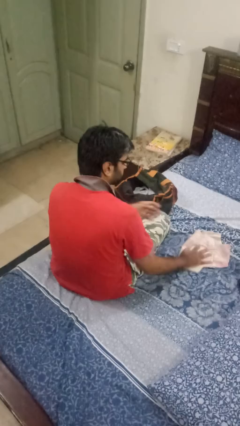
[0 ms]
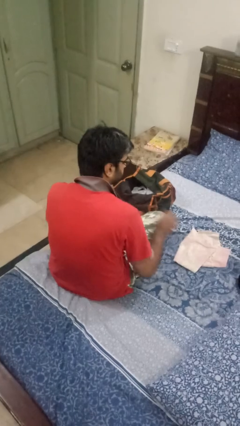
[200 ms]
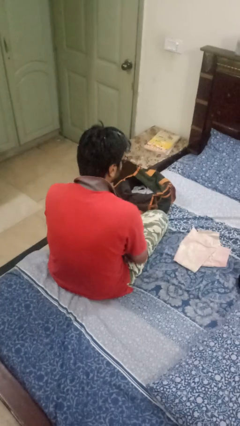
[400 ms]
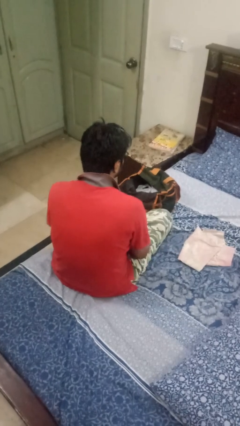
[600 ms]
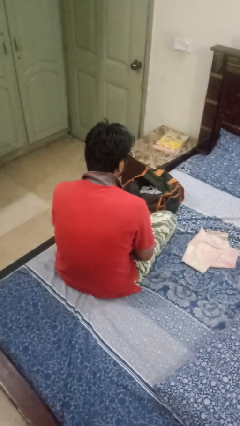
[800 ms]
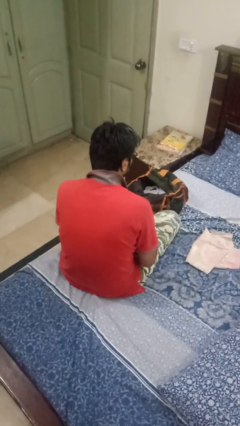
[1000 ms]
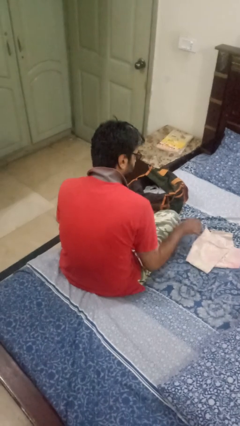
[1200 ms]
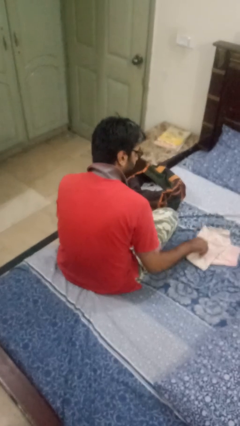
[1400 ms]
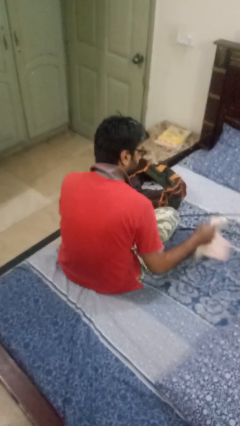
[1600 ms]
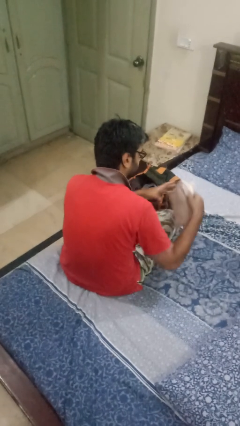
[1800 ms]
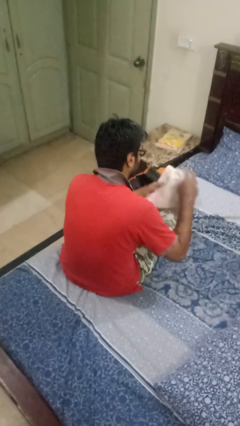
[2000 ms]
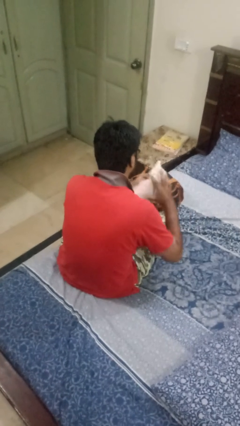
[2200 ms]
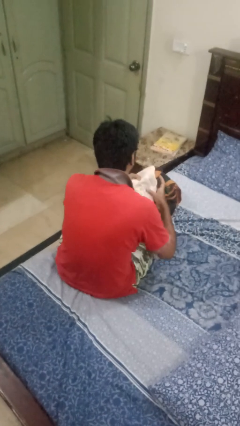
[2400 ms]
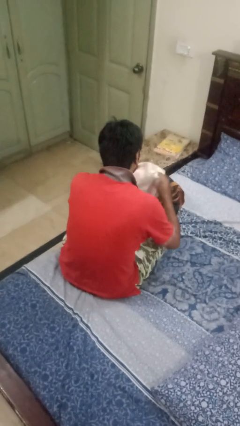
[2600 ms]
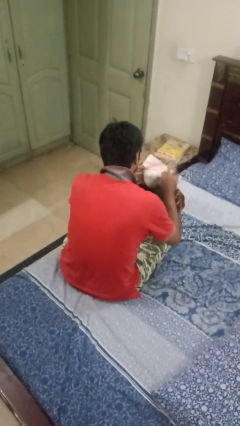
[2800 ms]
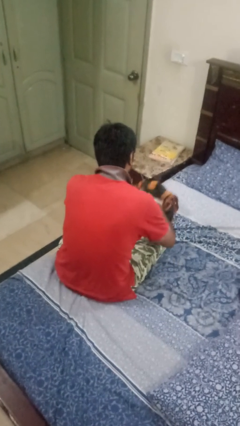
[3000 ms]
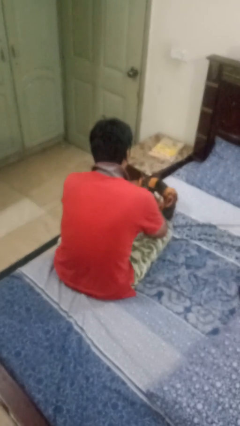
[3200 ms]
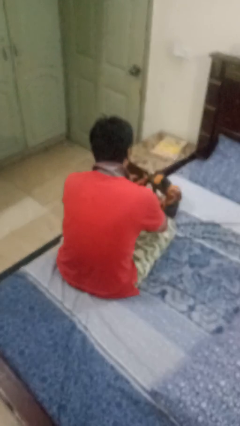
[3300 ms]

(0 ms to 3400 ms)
person puts object into bag

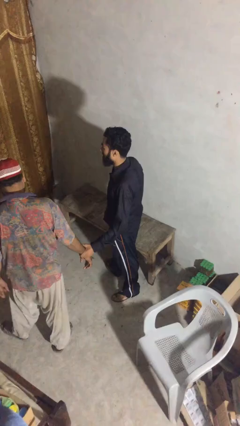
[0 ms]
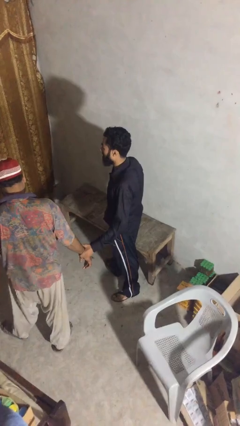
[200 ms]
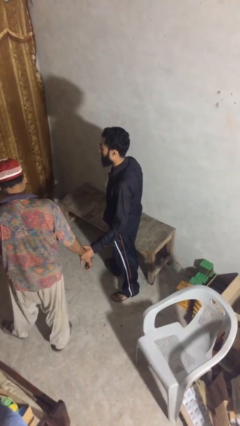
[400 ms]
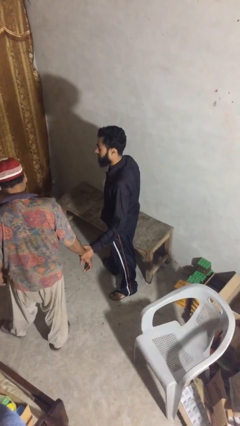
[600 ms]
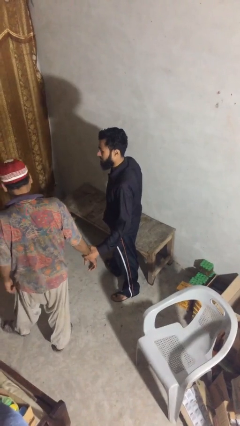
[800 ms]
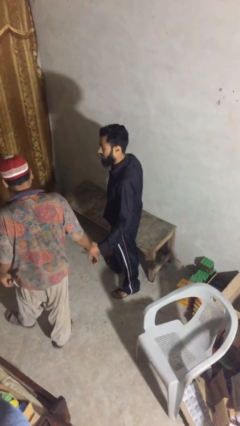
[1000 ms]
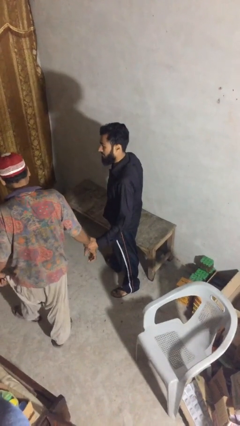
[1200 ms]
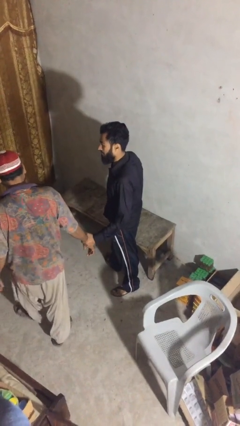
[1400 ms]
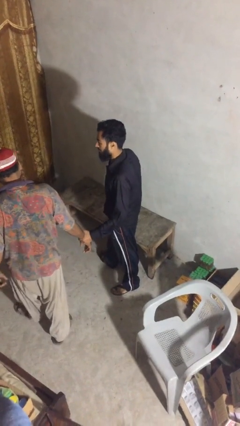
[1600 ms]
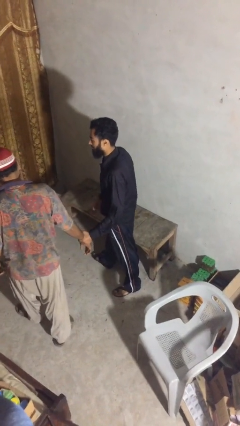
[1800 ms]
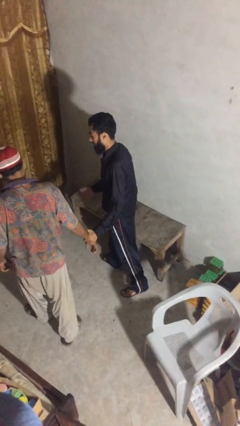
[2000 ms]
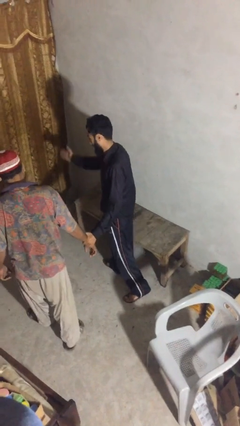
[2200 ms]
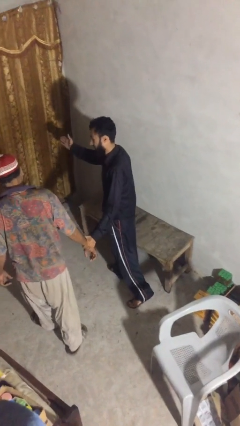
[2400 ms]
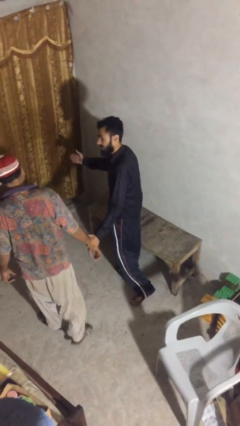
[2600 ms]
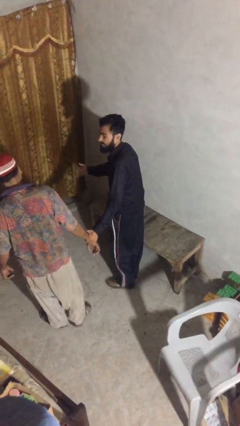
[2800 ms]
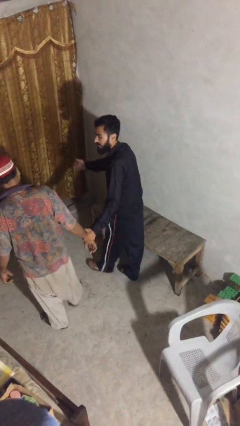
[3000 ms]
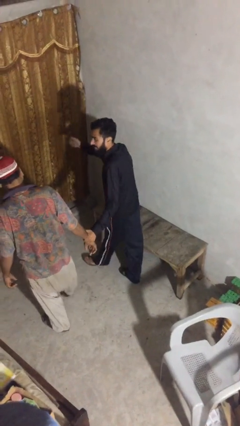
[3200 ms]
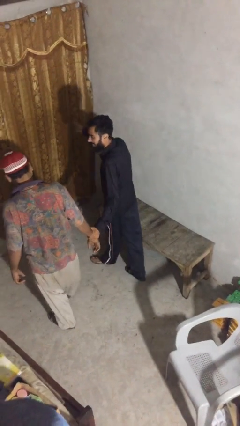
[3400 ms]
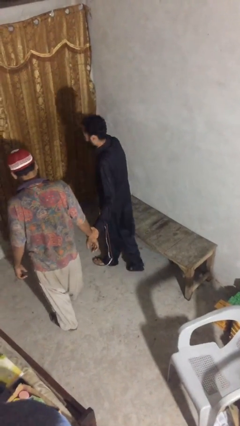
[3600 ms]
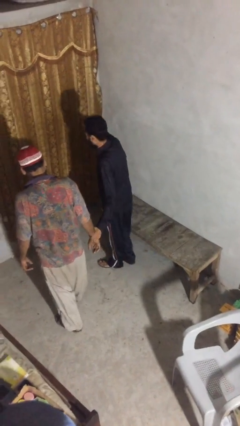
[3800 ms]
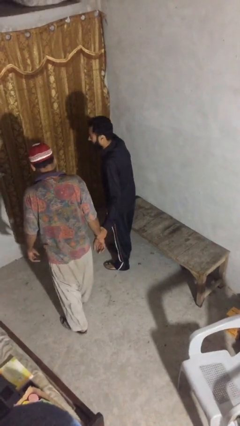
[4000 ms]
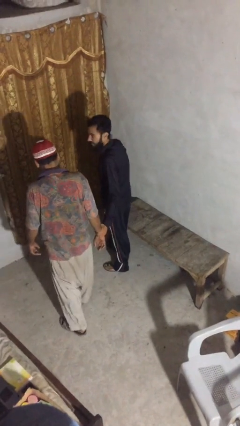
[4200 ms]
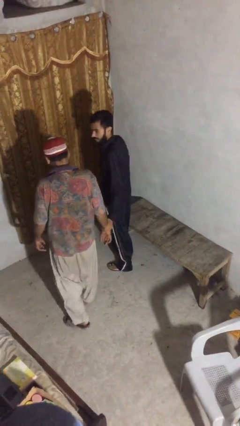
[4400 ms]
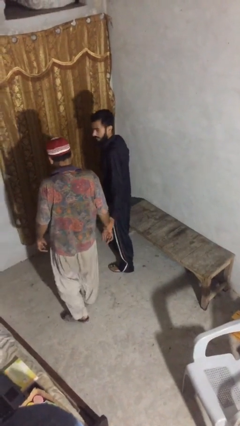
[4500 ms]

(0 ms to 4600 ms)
person holds hand

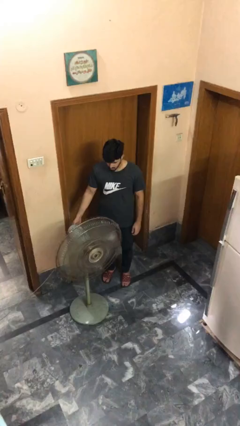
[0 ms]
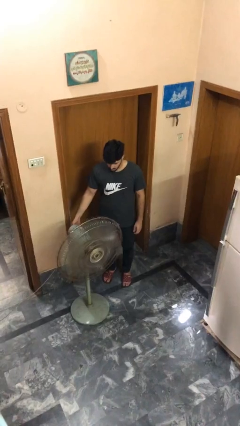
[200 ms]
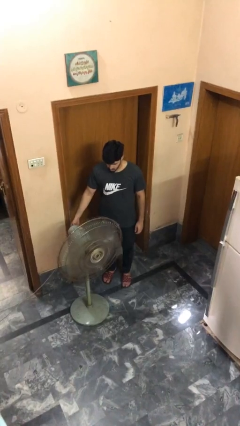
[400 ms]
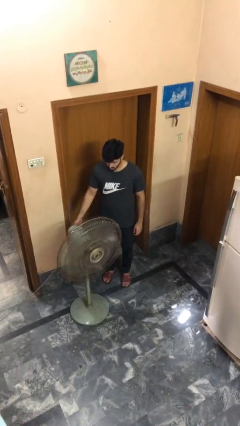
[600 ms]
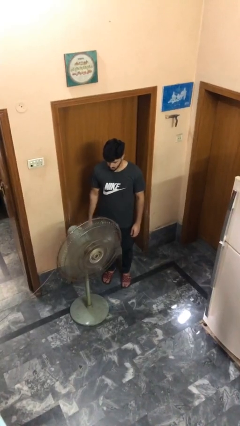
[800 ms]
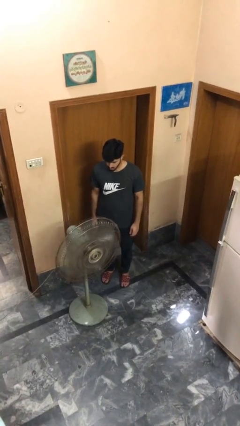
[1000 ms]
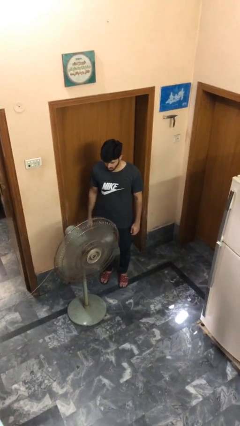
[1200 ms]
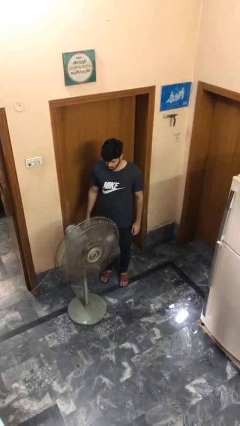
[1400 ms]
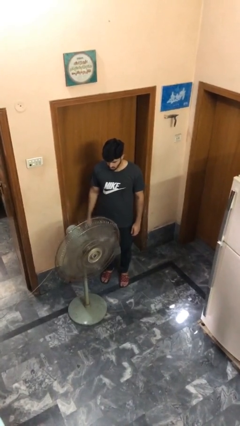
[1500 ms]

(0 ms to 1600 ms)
person turns off fan

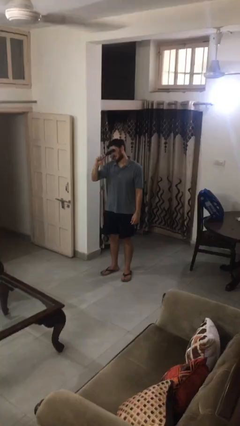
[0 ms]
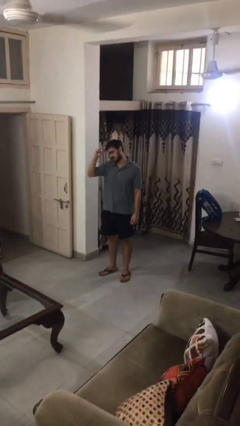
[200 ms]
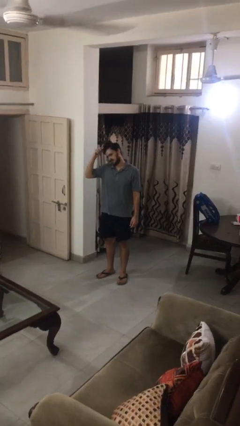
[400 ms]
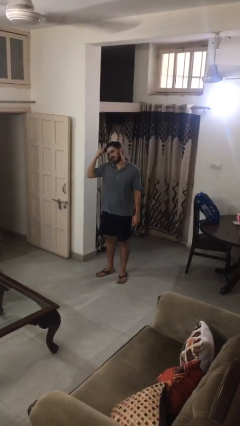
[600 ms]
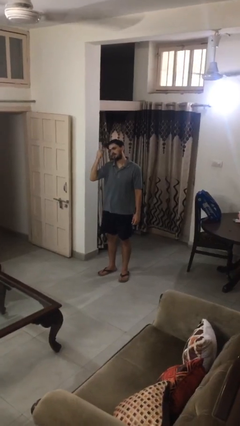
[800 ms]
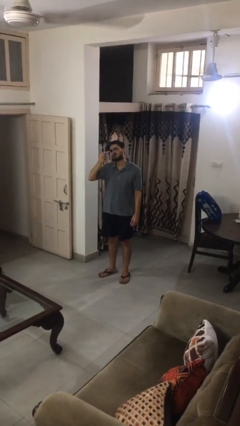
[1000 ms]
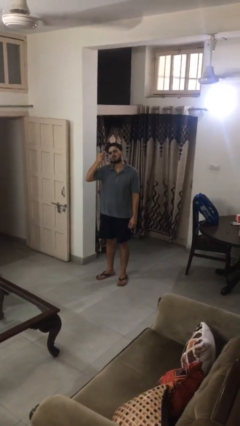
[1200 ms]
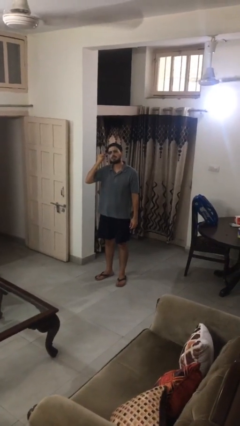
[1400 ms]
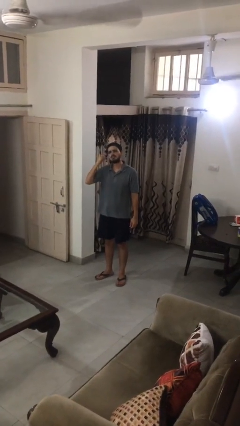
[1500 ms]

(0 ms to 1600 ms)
person brushes hair

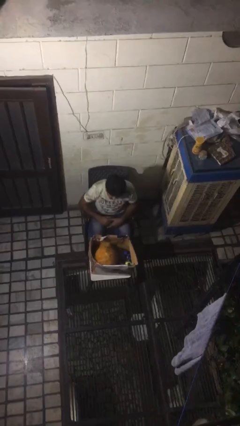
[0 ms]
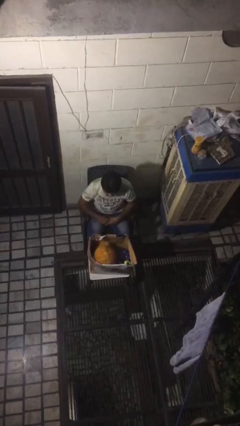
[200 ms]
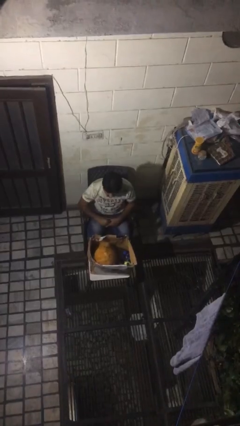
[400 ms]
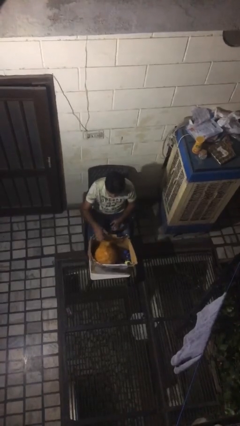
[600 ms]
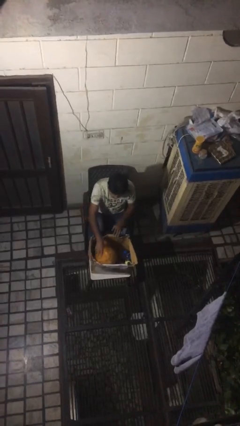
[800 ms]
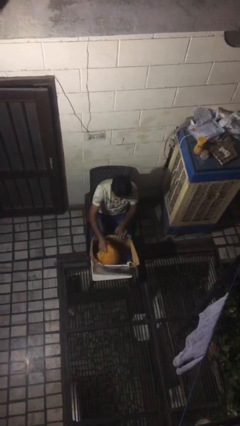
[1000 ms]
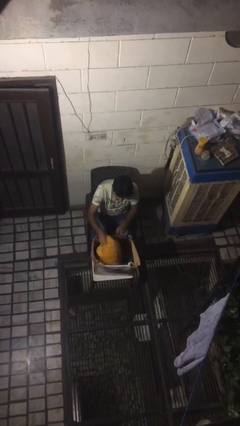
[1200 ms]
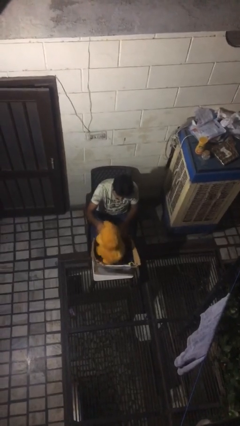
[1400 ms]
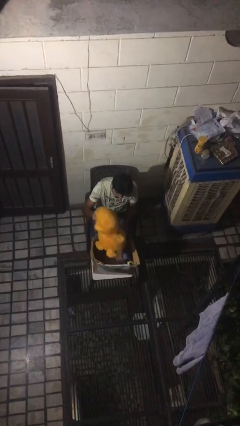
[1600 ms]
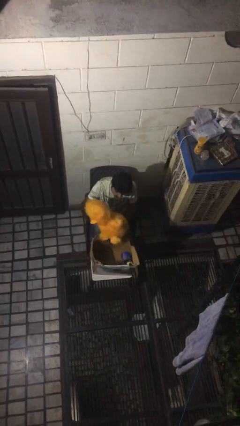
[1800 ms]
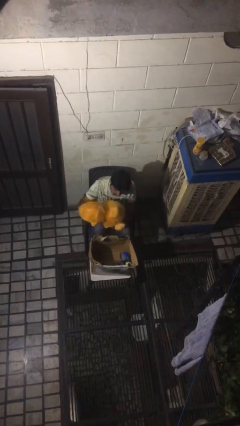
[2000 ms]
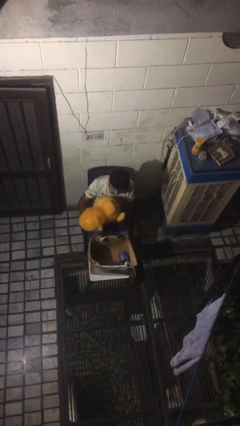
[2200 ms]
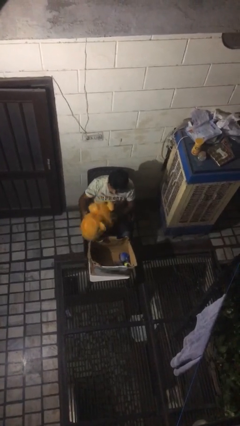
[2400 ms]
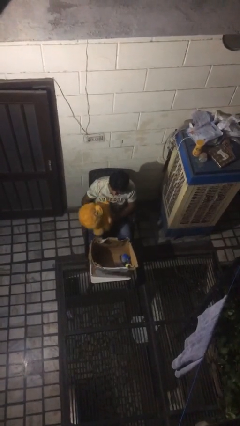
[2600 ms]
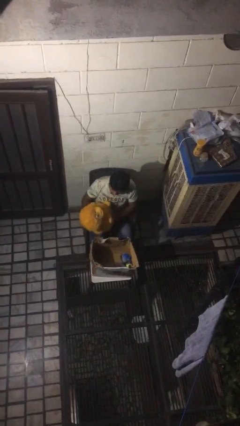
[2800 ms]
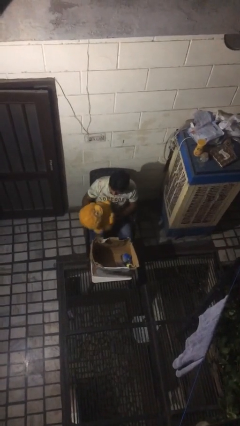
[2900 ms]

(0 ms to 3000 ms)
person takes object from box

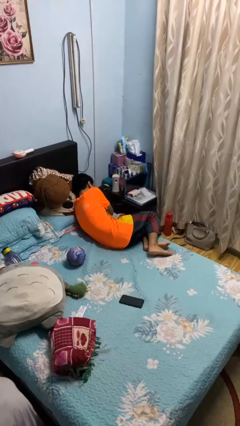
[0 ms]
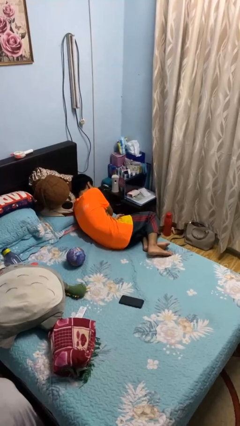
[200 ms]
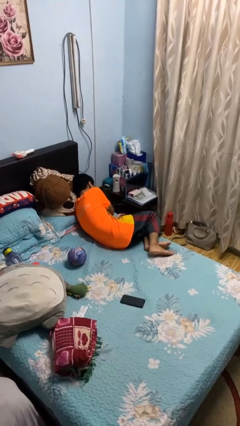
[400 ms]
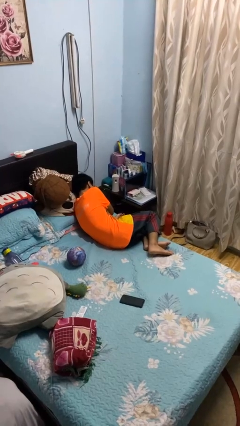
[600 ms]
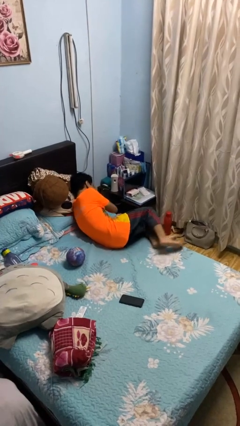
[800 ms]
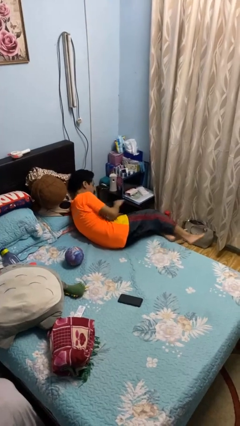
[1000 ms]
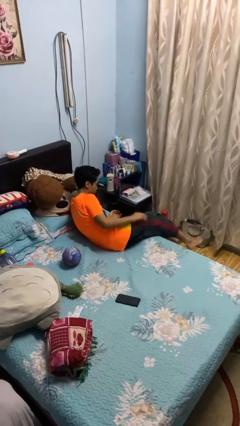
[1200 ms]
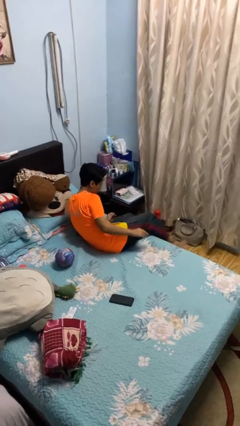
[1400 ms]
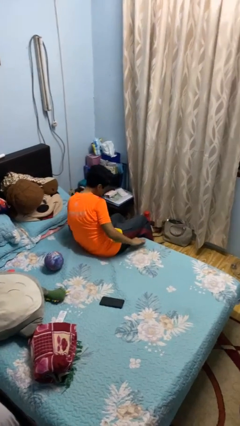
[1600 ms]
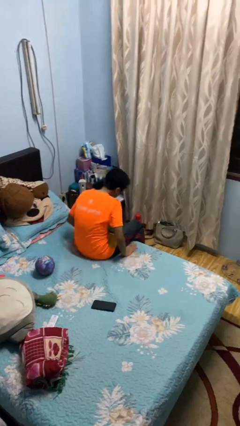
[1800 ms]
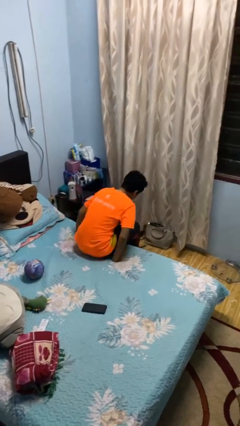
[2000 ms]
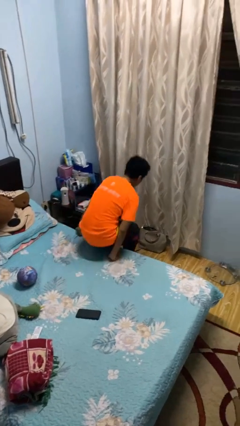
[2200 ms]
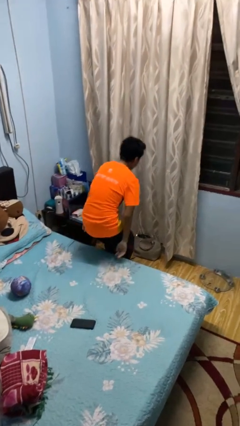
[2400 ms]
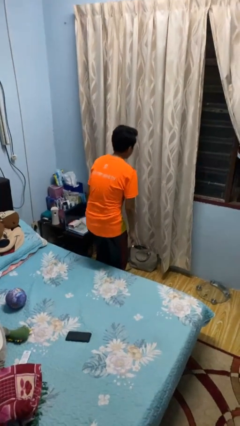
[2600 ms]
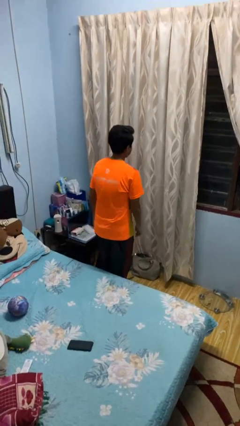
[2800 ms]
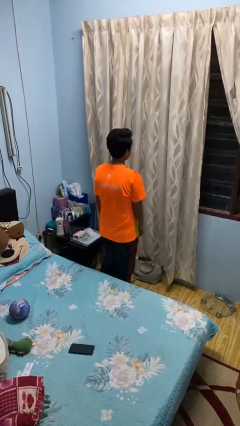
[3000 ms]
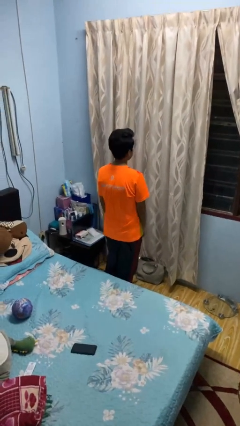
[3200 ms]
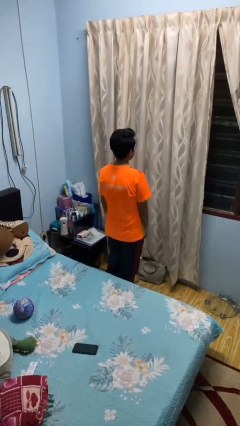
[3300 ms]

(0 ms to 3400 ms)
person stands up
